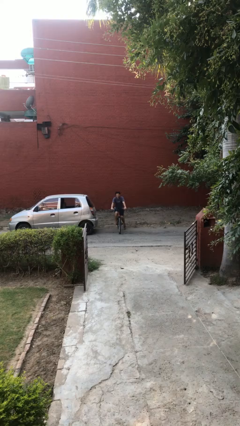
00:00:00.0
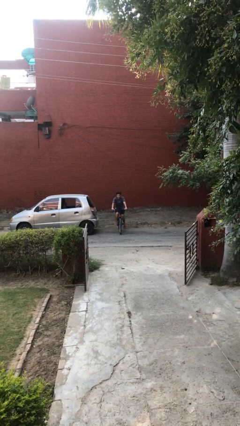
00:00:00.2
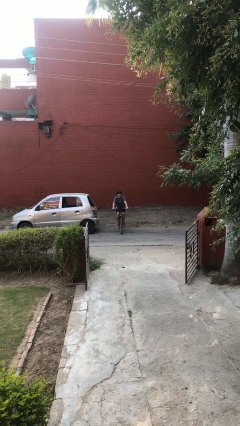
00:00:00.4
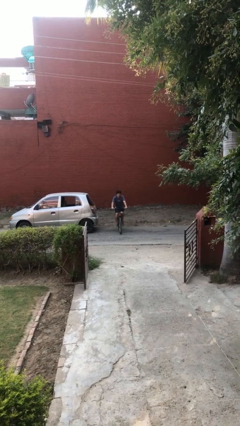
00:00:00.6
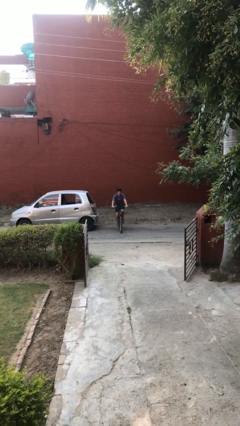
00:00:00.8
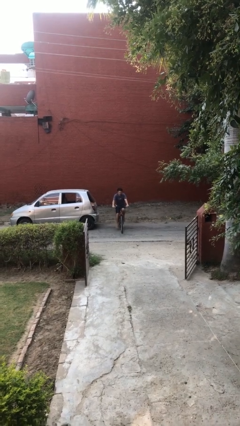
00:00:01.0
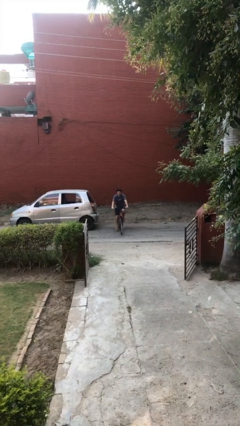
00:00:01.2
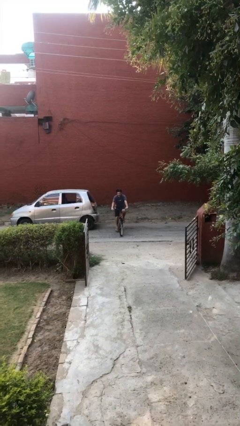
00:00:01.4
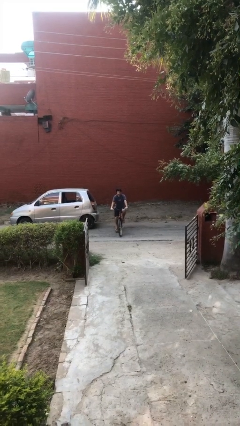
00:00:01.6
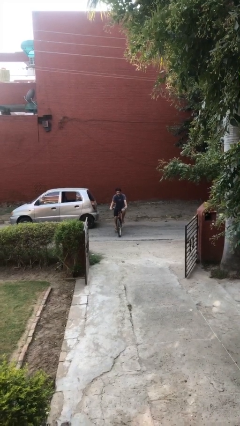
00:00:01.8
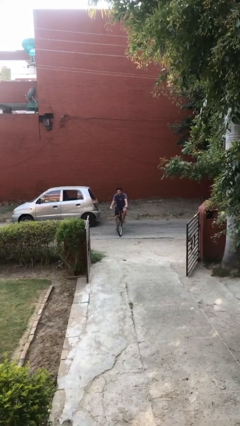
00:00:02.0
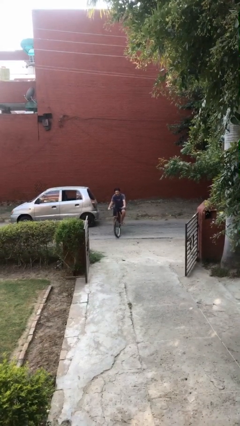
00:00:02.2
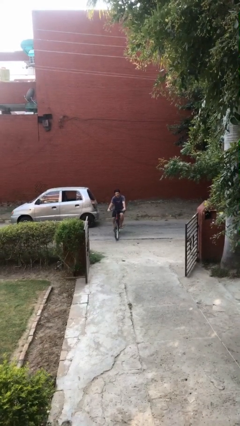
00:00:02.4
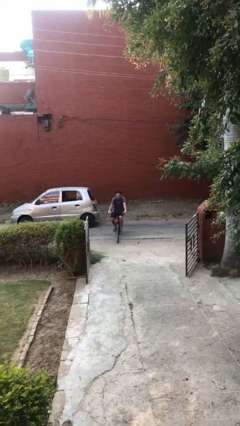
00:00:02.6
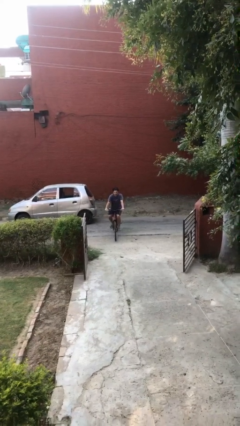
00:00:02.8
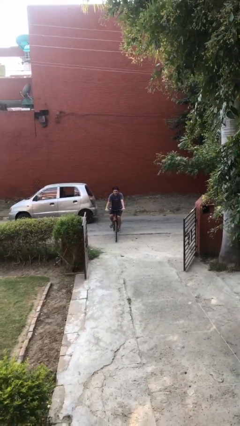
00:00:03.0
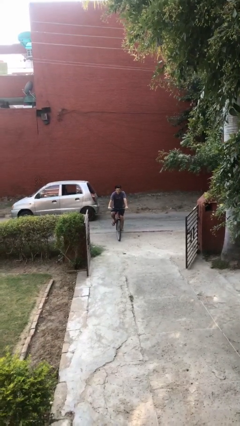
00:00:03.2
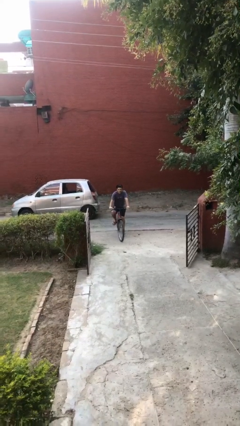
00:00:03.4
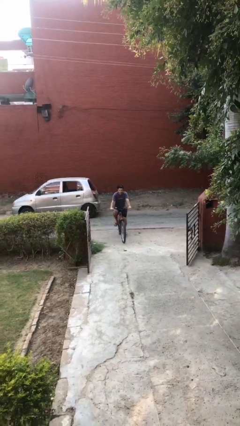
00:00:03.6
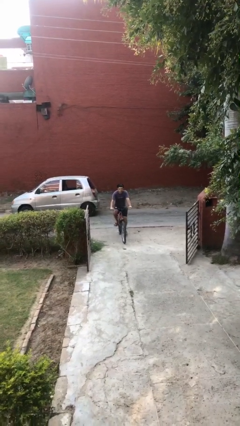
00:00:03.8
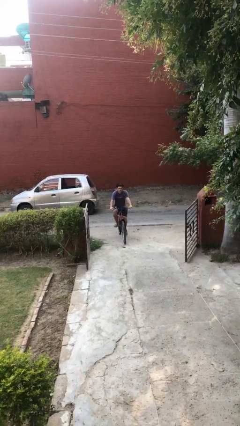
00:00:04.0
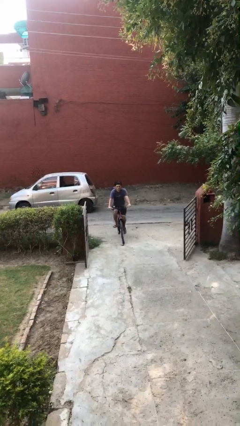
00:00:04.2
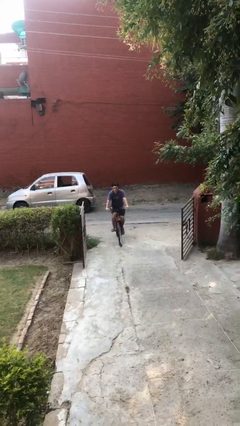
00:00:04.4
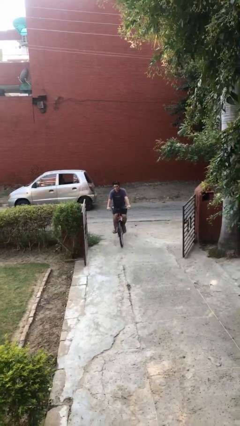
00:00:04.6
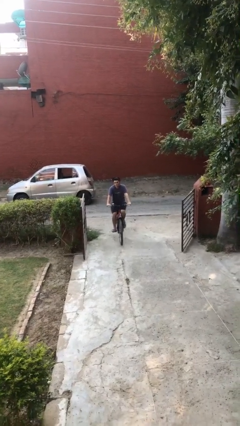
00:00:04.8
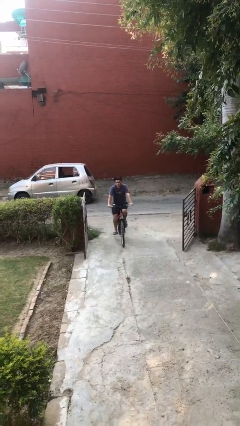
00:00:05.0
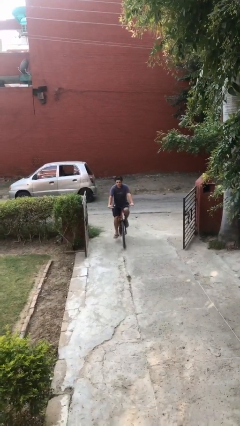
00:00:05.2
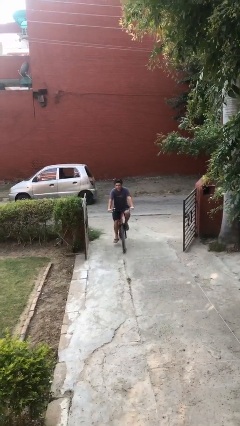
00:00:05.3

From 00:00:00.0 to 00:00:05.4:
person rides bicycle

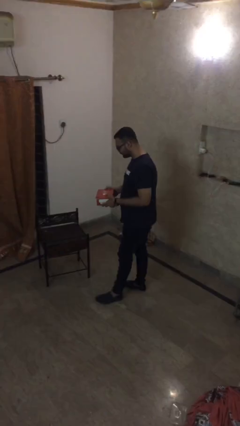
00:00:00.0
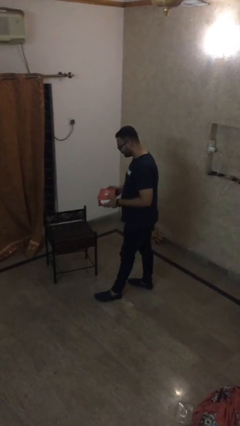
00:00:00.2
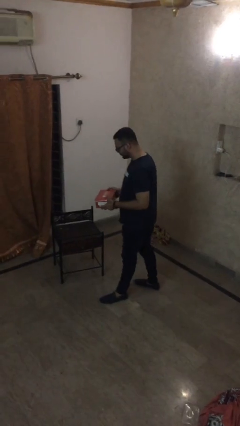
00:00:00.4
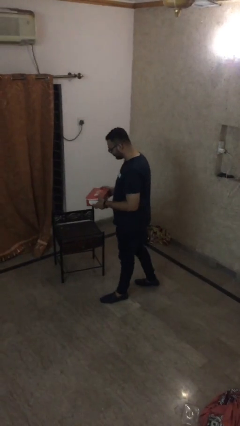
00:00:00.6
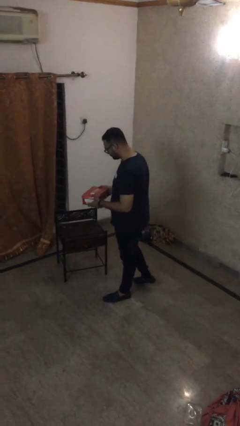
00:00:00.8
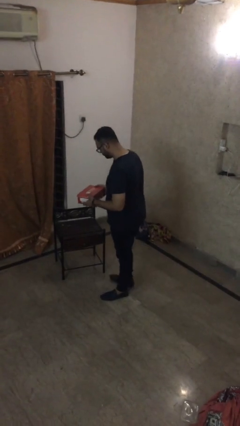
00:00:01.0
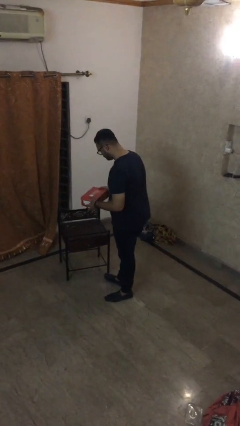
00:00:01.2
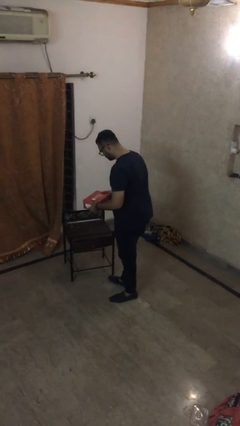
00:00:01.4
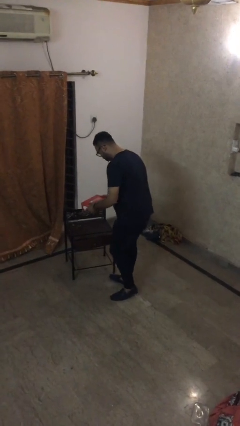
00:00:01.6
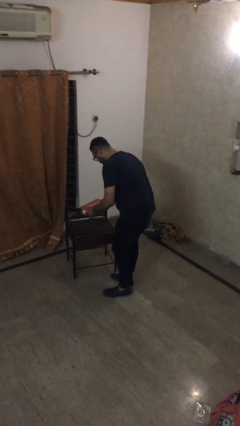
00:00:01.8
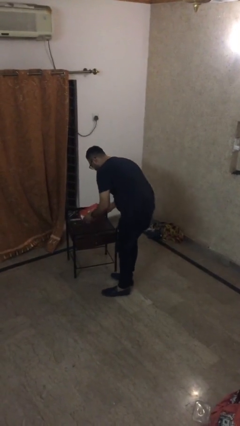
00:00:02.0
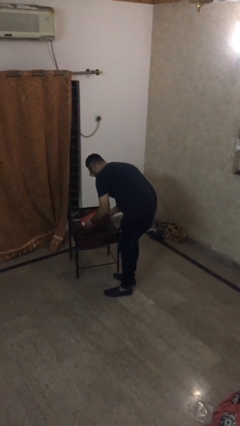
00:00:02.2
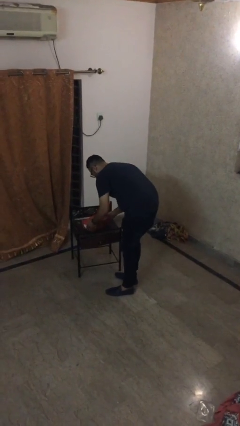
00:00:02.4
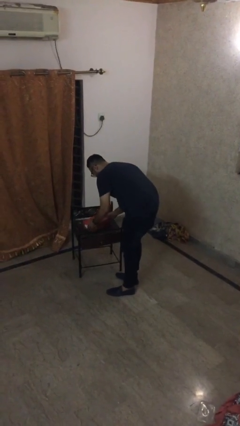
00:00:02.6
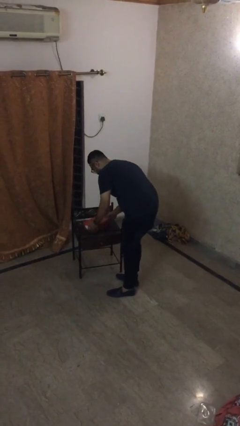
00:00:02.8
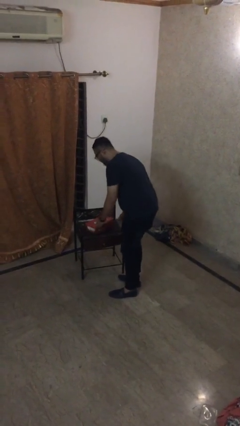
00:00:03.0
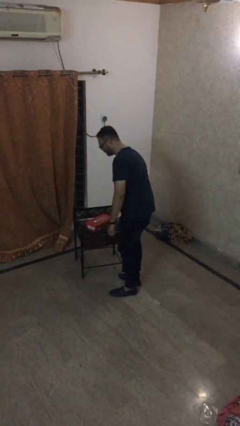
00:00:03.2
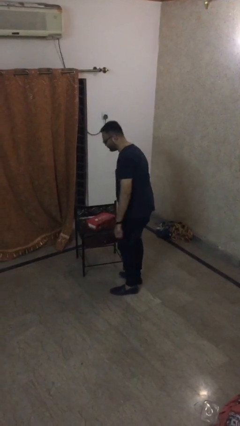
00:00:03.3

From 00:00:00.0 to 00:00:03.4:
person puts down object on table

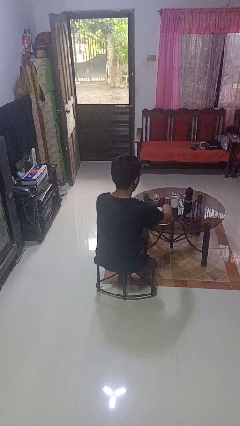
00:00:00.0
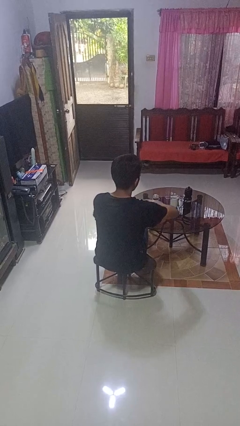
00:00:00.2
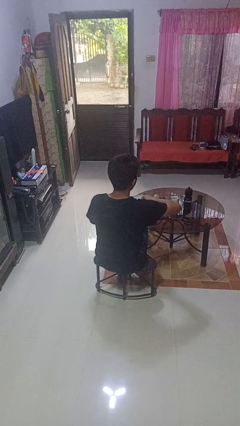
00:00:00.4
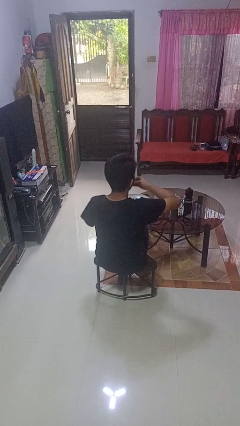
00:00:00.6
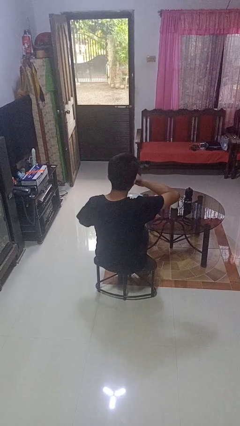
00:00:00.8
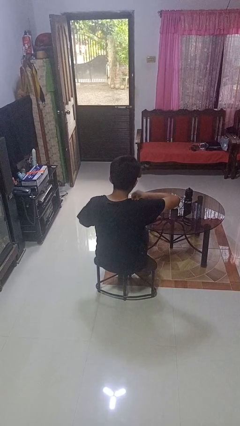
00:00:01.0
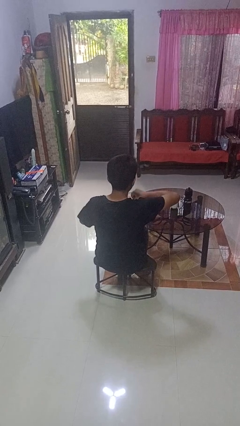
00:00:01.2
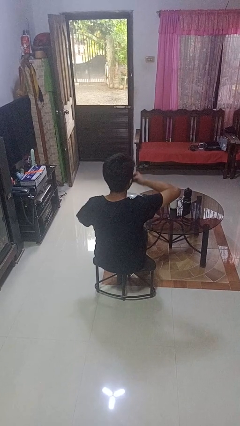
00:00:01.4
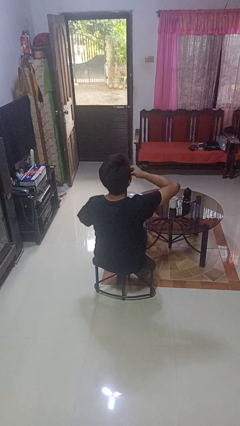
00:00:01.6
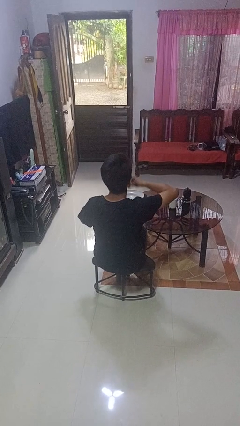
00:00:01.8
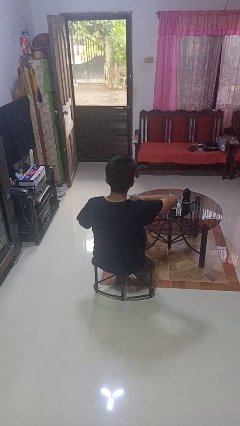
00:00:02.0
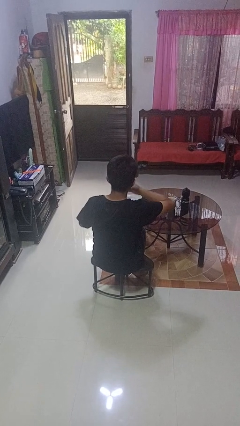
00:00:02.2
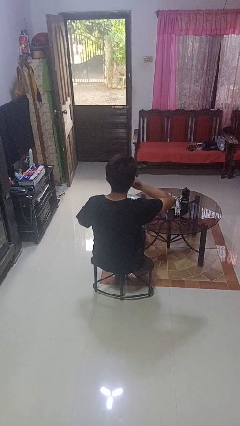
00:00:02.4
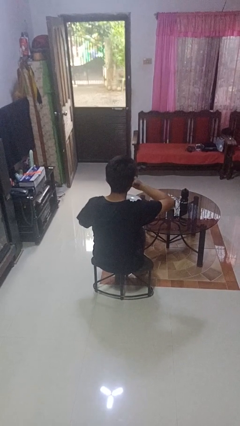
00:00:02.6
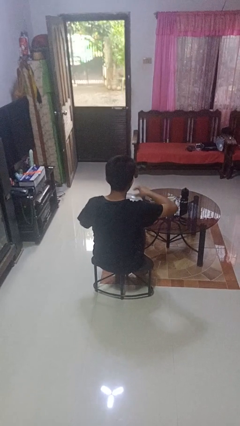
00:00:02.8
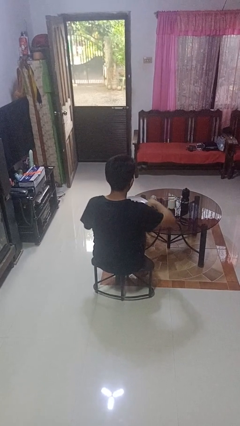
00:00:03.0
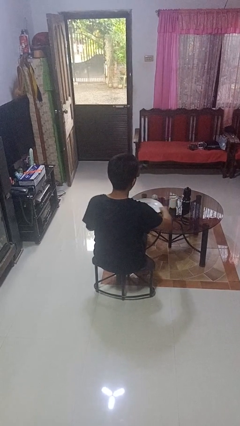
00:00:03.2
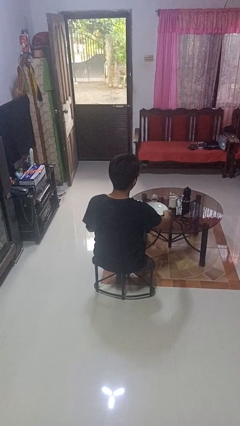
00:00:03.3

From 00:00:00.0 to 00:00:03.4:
person eats with hands

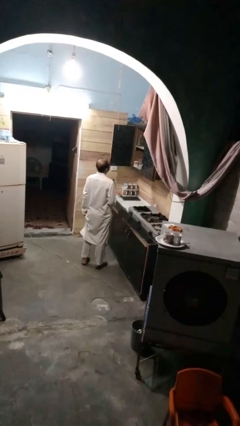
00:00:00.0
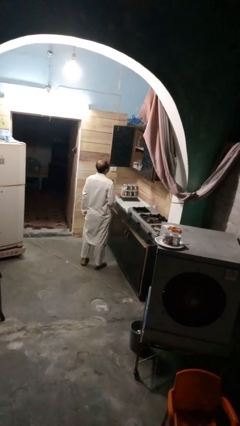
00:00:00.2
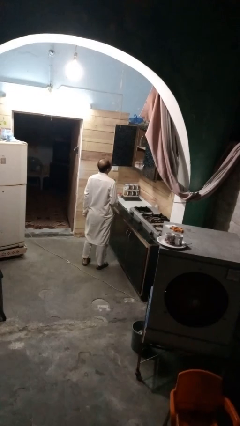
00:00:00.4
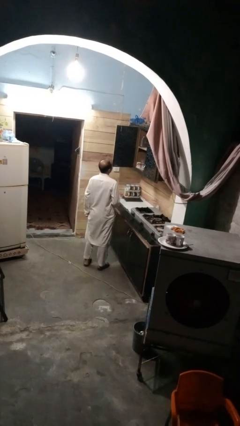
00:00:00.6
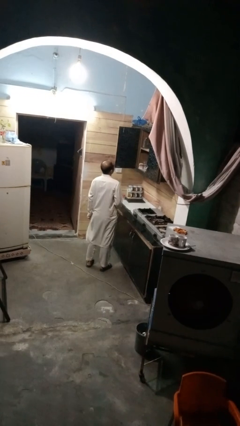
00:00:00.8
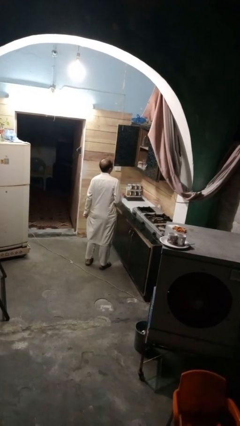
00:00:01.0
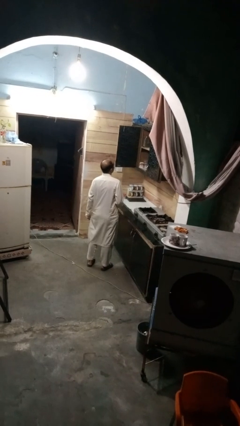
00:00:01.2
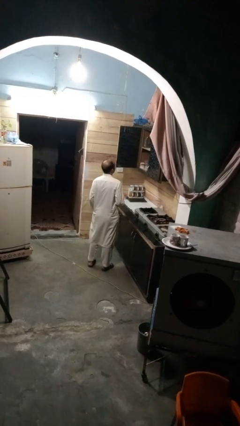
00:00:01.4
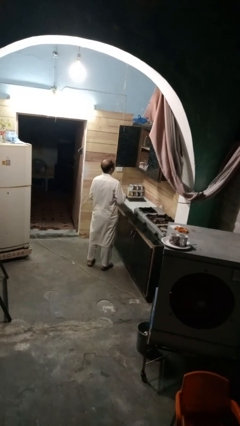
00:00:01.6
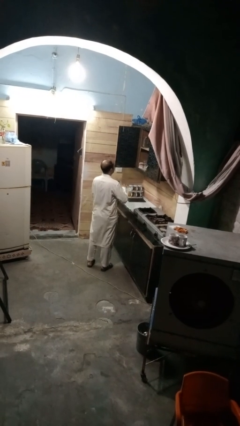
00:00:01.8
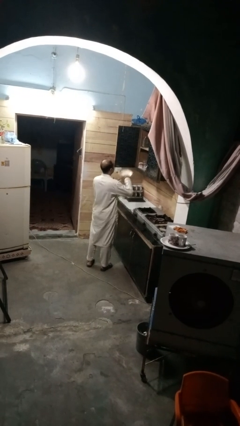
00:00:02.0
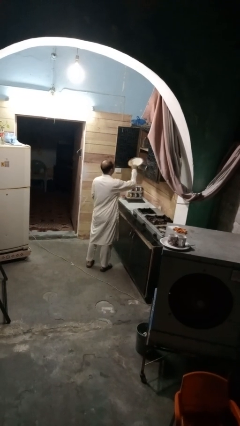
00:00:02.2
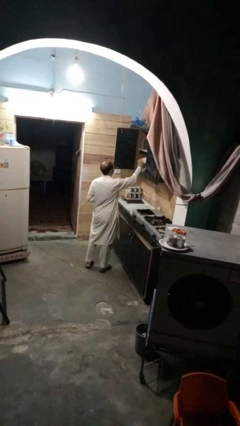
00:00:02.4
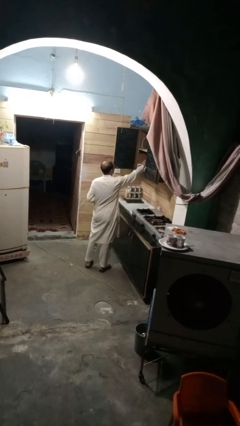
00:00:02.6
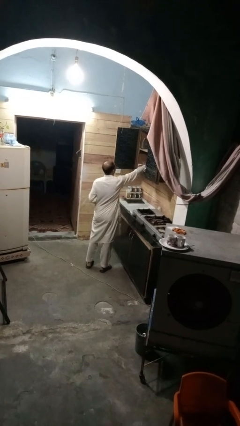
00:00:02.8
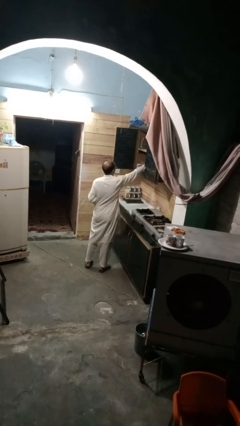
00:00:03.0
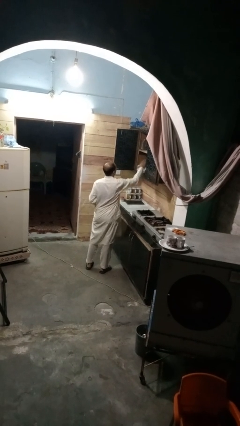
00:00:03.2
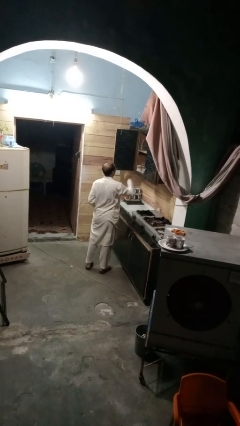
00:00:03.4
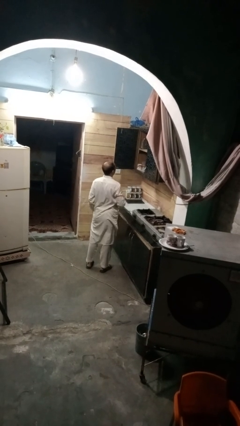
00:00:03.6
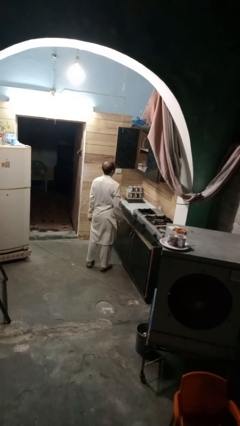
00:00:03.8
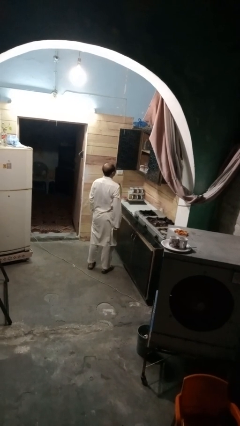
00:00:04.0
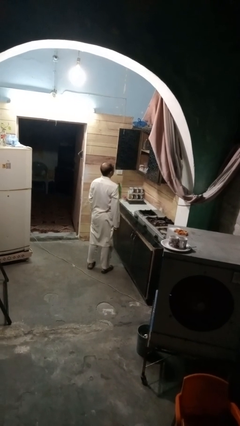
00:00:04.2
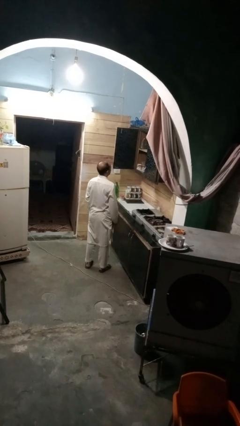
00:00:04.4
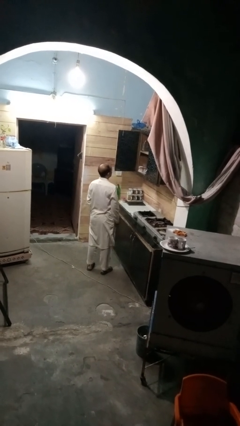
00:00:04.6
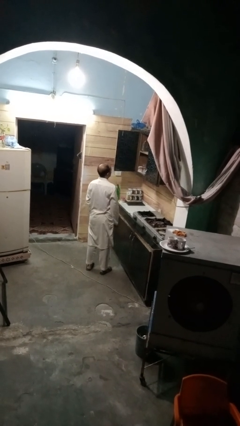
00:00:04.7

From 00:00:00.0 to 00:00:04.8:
person puts object in cabinet

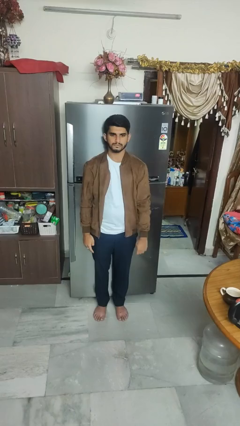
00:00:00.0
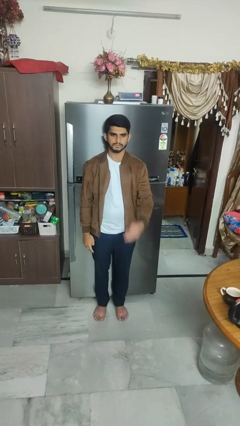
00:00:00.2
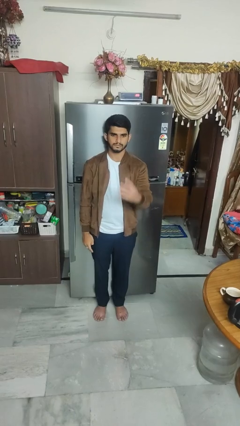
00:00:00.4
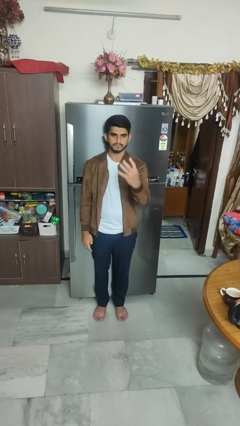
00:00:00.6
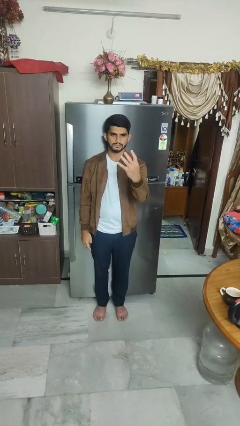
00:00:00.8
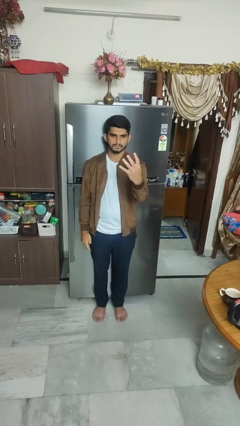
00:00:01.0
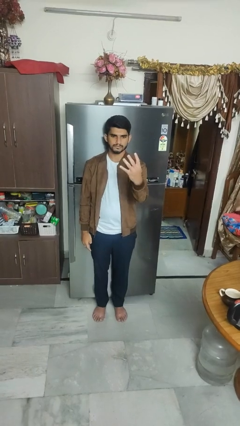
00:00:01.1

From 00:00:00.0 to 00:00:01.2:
person gestures number four
